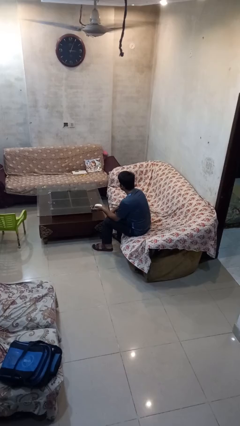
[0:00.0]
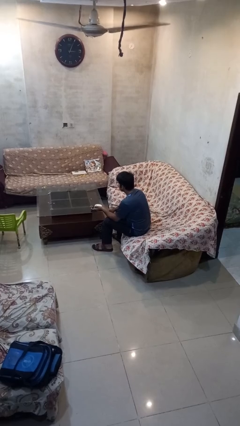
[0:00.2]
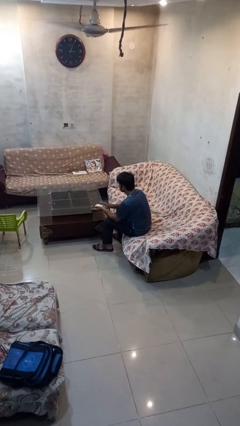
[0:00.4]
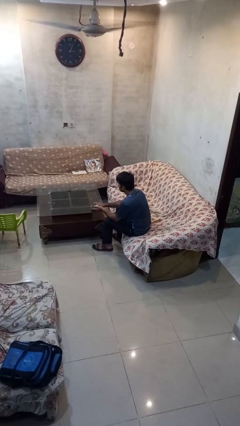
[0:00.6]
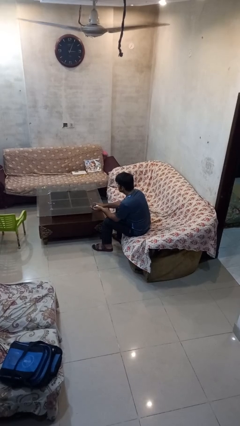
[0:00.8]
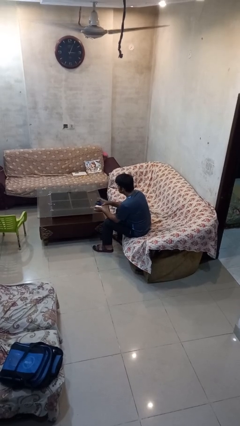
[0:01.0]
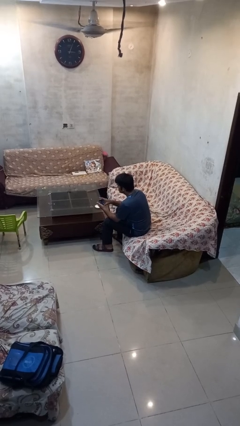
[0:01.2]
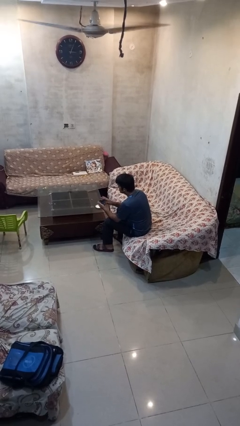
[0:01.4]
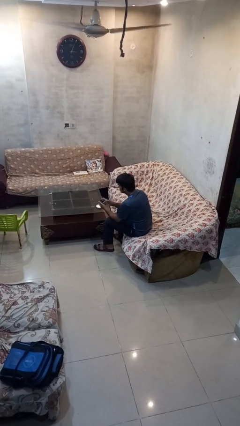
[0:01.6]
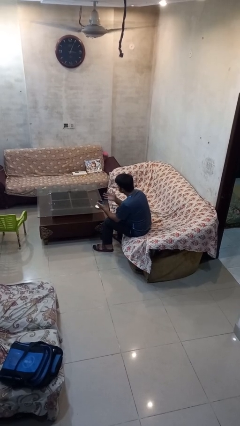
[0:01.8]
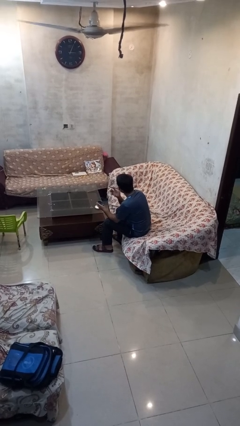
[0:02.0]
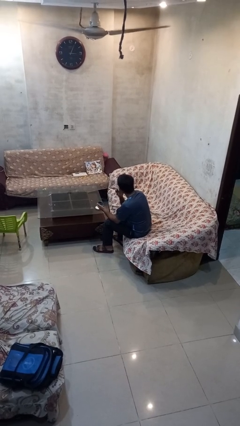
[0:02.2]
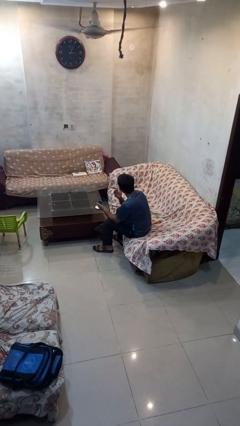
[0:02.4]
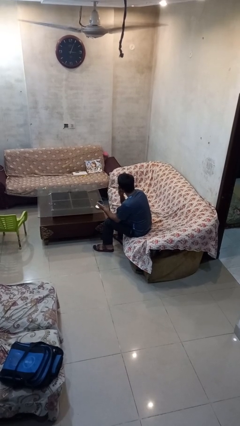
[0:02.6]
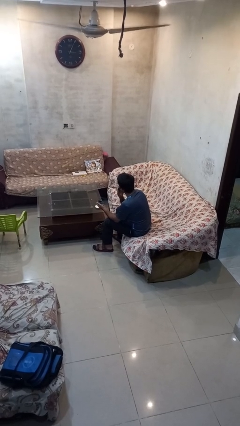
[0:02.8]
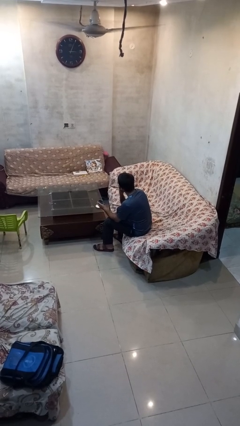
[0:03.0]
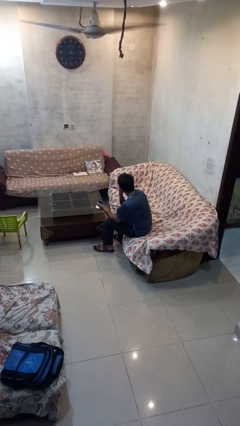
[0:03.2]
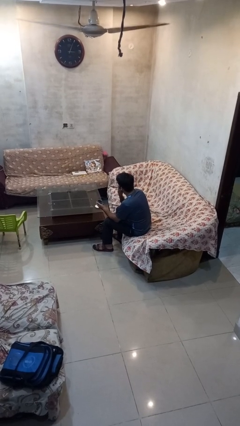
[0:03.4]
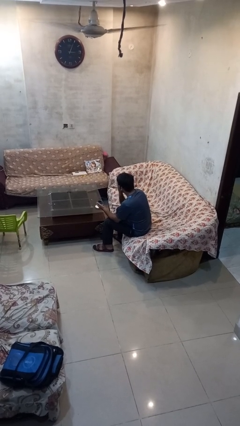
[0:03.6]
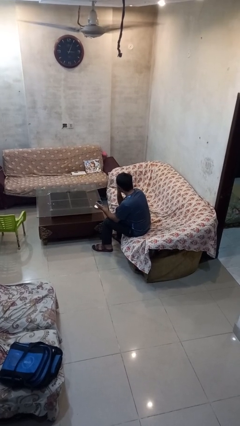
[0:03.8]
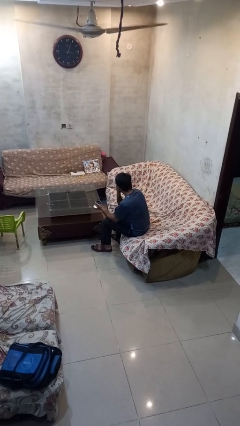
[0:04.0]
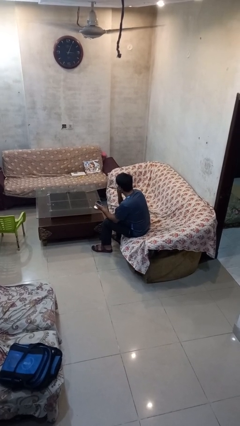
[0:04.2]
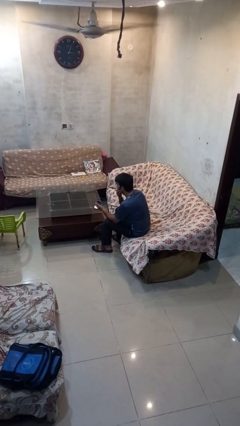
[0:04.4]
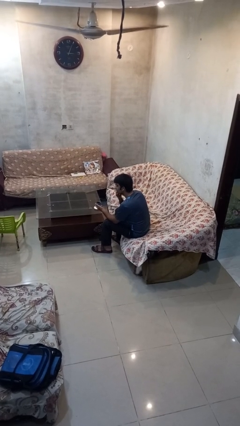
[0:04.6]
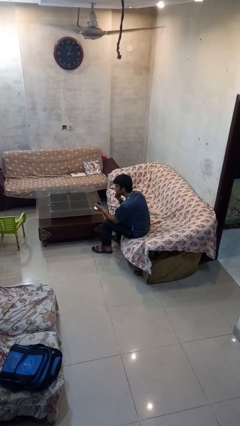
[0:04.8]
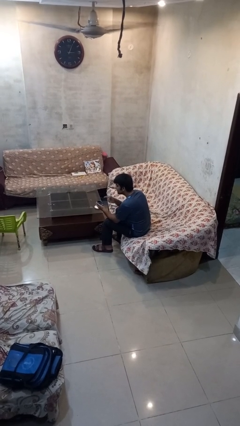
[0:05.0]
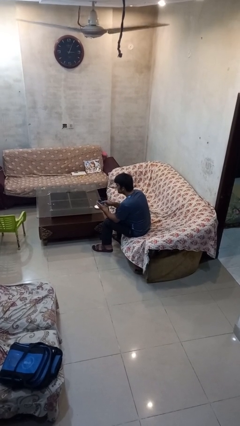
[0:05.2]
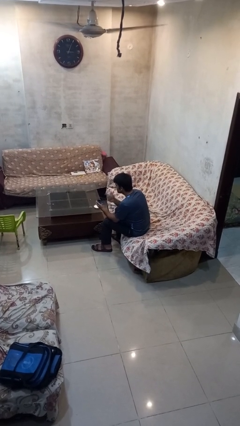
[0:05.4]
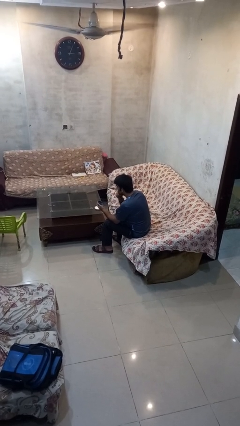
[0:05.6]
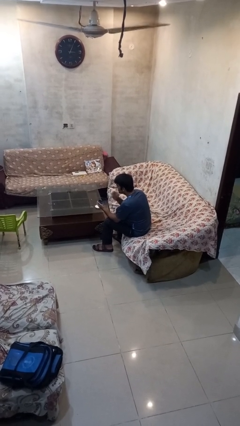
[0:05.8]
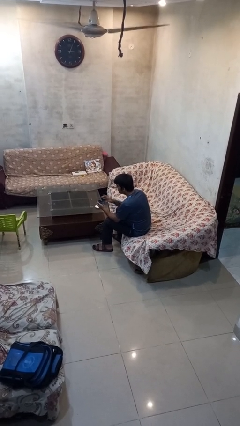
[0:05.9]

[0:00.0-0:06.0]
person applies facial moisturizer

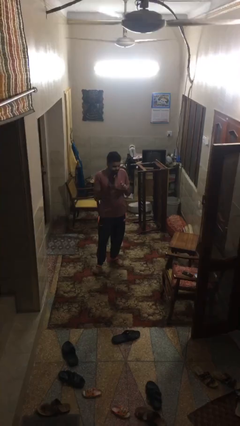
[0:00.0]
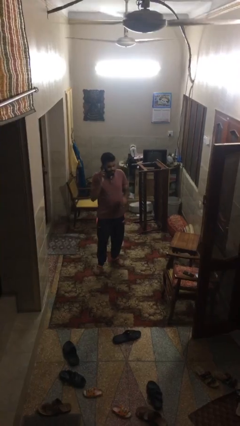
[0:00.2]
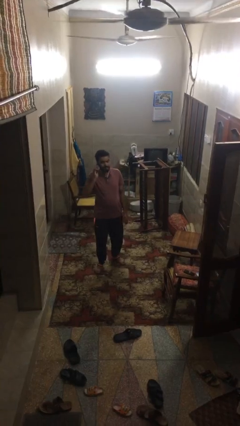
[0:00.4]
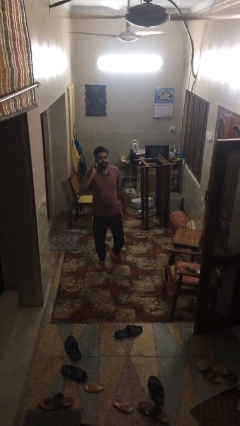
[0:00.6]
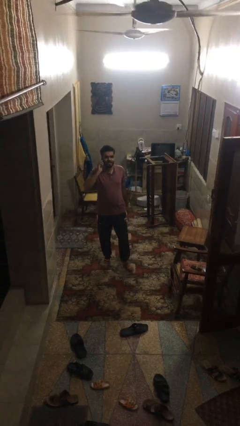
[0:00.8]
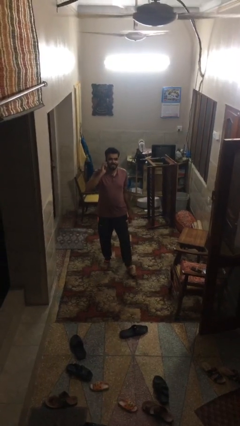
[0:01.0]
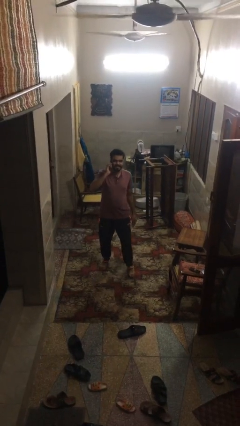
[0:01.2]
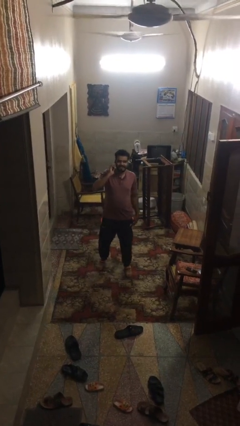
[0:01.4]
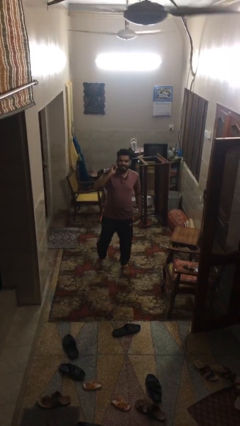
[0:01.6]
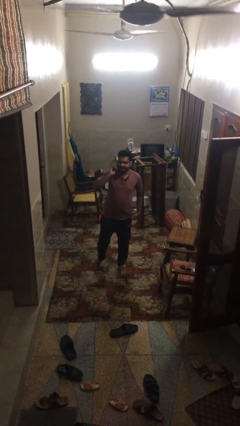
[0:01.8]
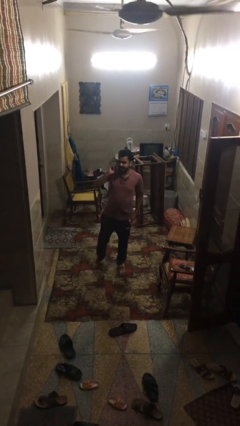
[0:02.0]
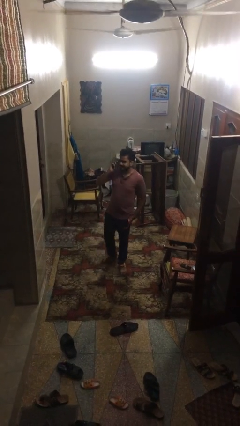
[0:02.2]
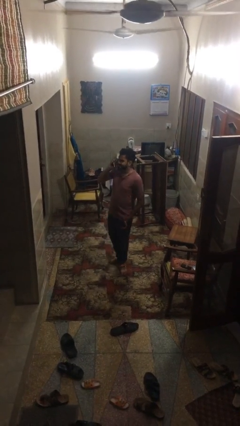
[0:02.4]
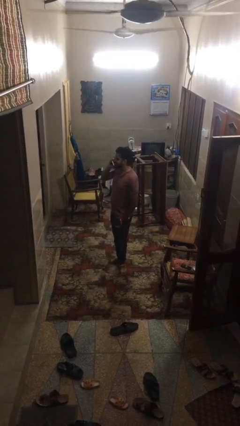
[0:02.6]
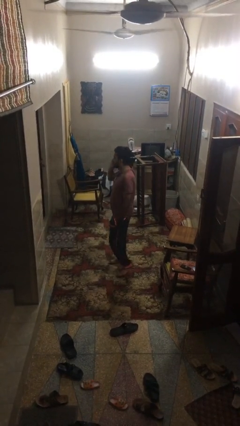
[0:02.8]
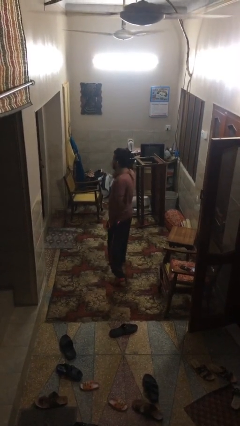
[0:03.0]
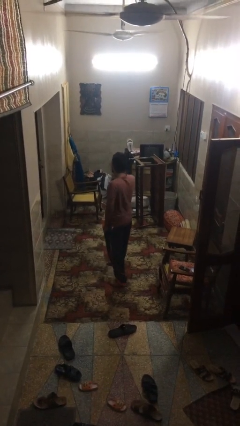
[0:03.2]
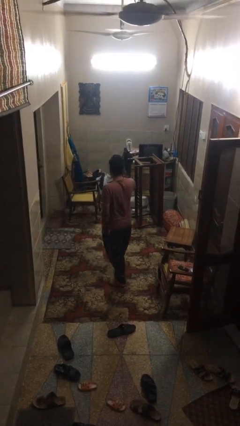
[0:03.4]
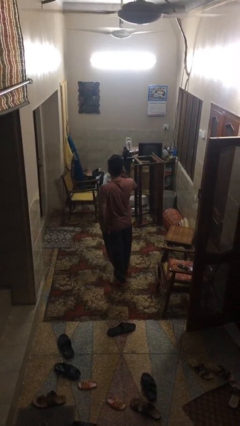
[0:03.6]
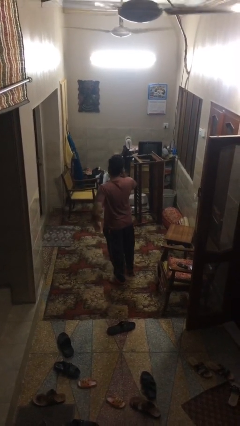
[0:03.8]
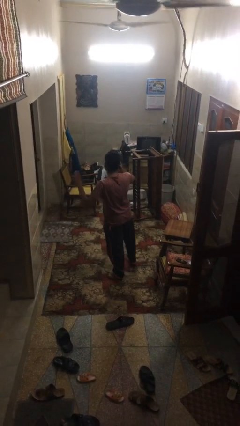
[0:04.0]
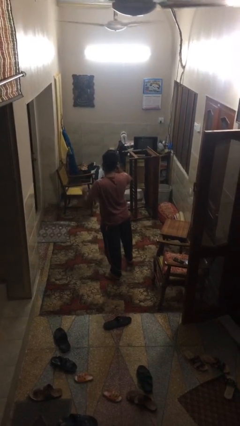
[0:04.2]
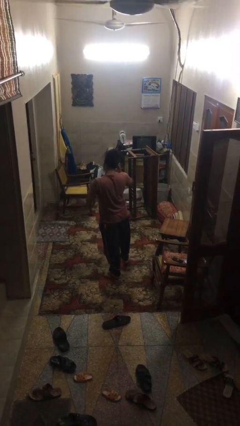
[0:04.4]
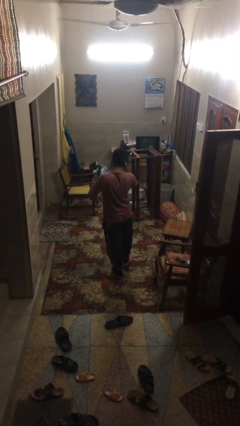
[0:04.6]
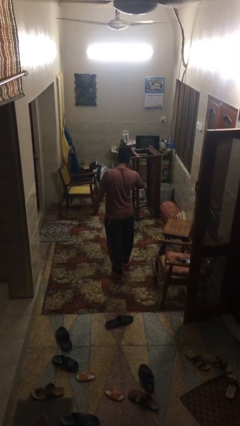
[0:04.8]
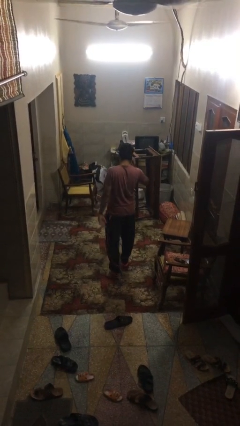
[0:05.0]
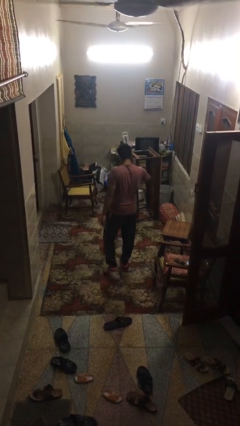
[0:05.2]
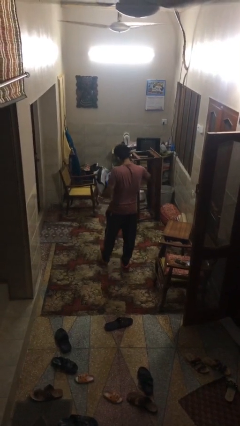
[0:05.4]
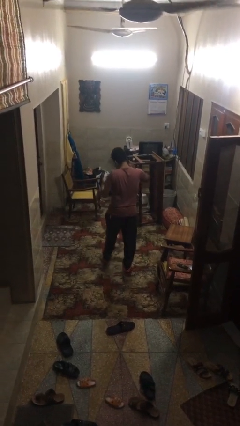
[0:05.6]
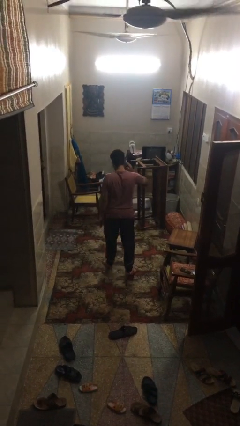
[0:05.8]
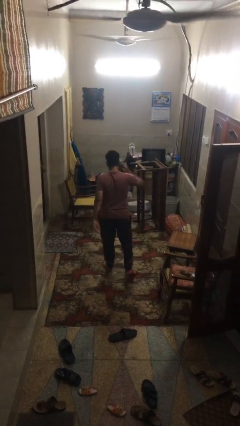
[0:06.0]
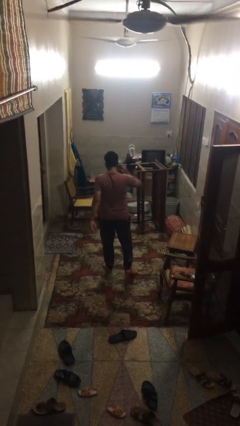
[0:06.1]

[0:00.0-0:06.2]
person talks on phone

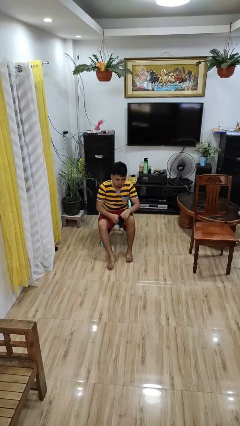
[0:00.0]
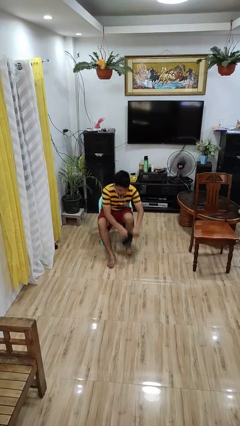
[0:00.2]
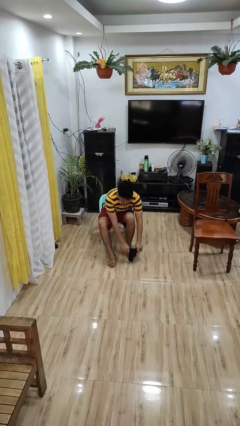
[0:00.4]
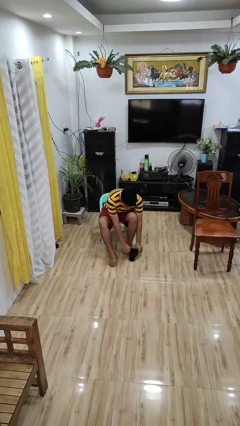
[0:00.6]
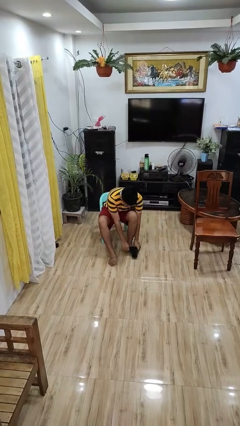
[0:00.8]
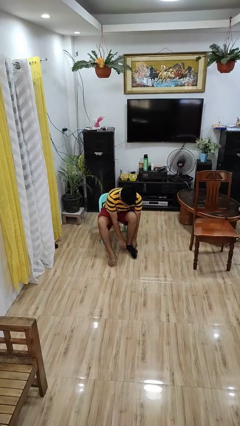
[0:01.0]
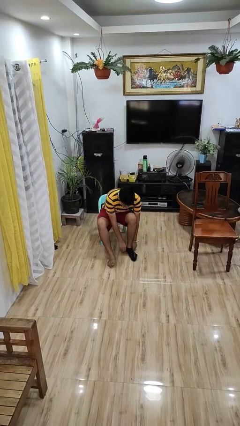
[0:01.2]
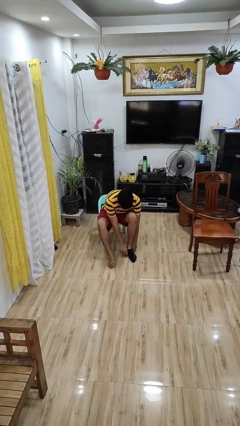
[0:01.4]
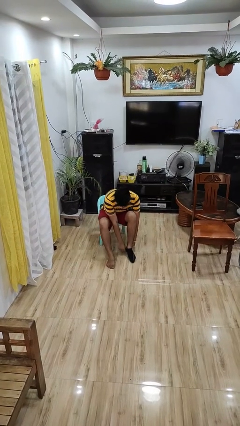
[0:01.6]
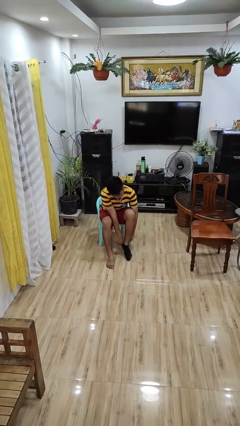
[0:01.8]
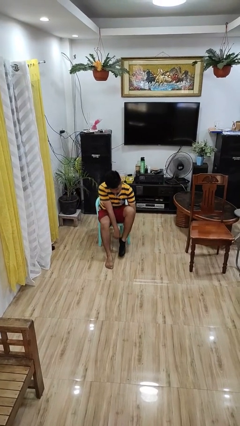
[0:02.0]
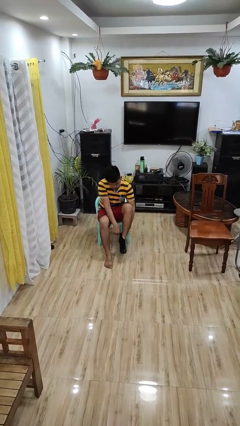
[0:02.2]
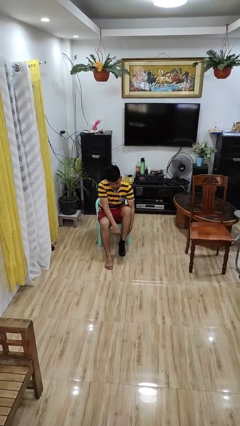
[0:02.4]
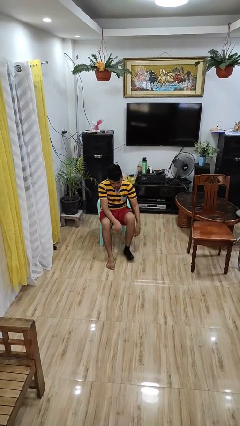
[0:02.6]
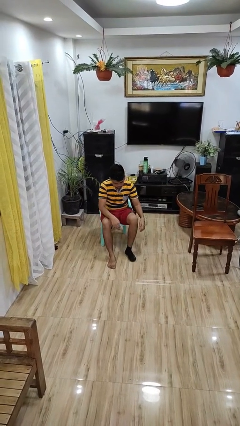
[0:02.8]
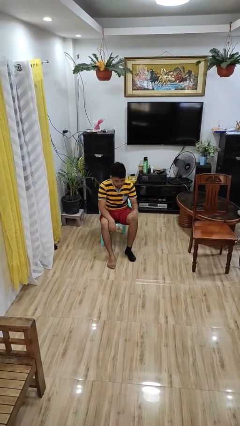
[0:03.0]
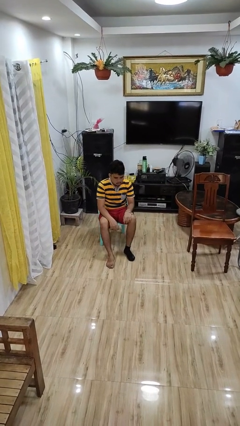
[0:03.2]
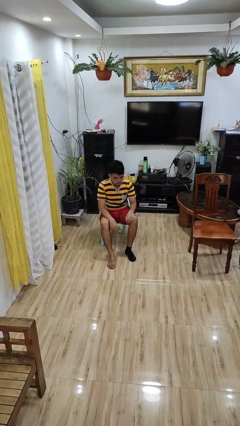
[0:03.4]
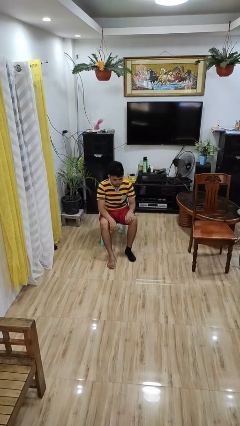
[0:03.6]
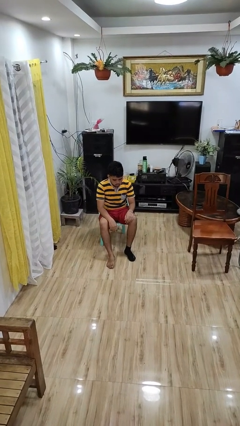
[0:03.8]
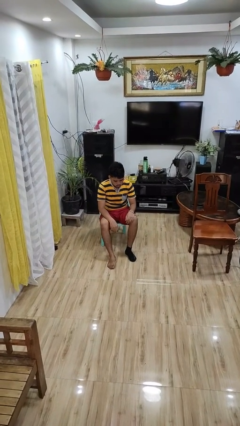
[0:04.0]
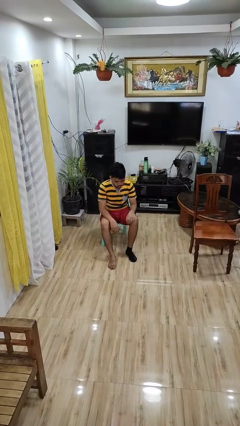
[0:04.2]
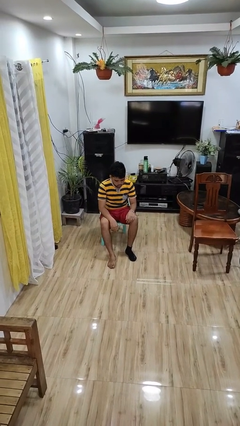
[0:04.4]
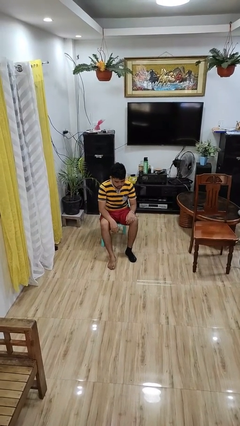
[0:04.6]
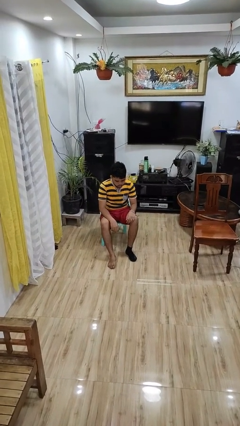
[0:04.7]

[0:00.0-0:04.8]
person puts on socks

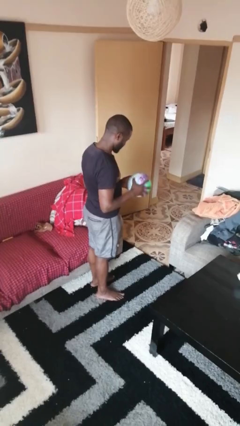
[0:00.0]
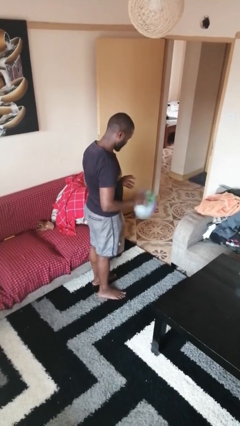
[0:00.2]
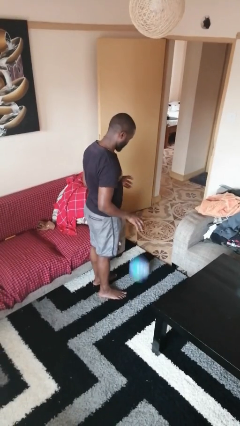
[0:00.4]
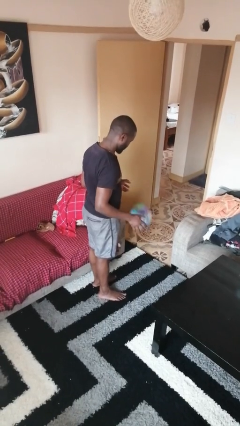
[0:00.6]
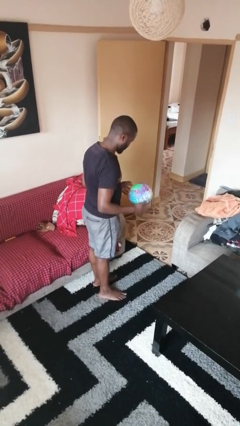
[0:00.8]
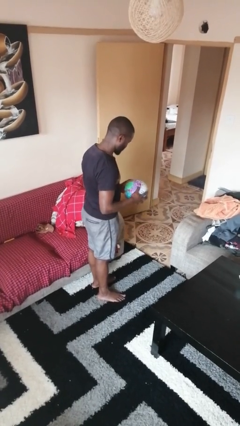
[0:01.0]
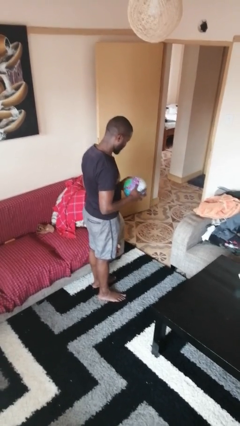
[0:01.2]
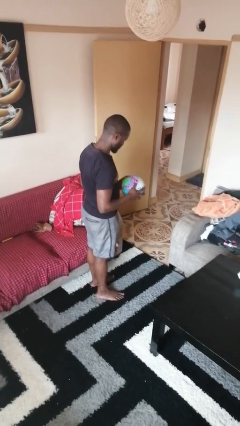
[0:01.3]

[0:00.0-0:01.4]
person bounces ball on floor
